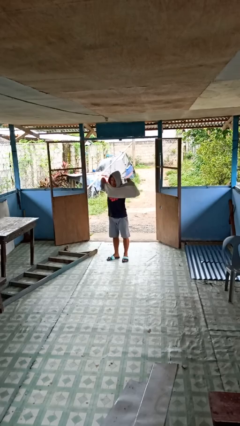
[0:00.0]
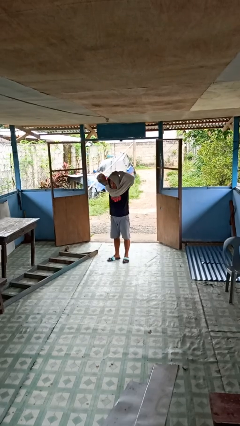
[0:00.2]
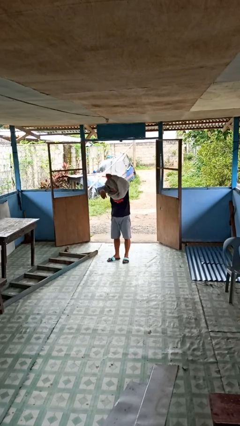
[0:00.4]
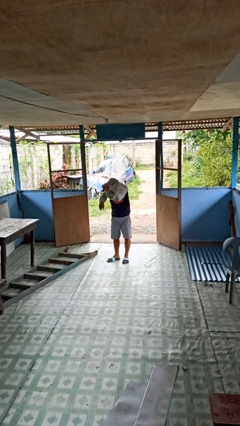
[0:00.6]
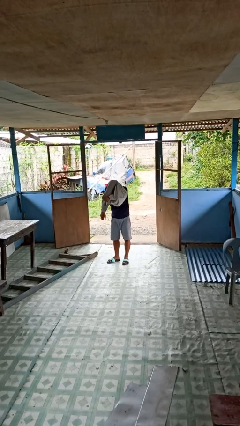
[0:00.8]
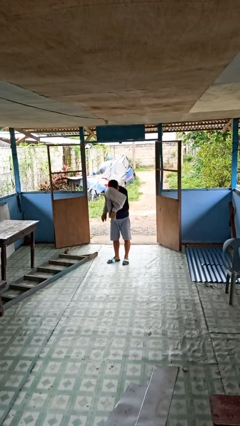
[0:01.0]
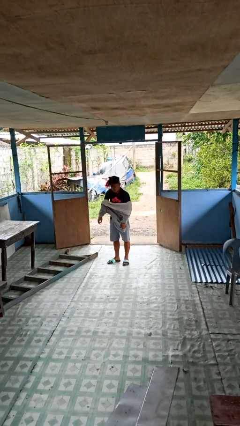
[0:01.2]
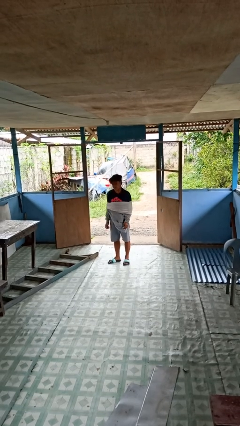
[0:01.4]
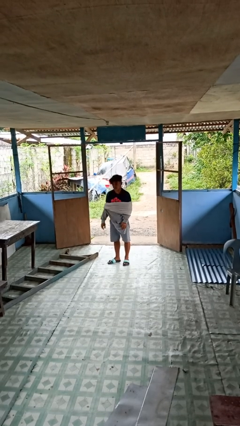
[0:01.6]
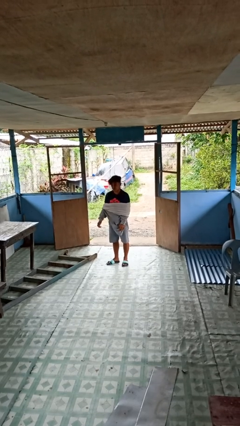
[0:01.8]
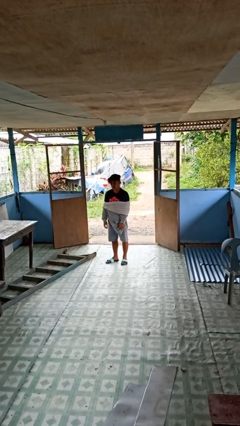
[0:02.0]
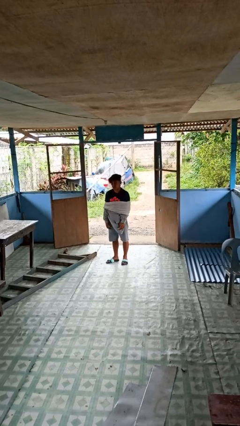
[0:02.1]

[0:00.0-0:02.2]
person takes off hoodie

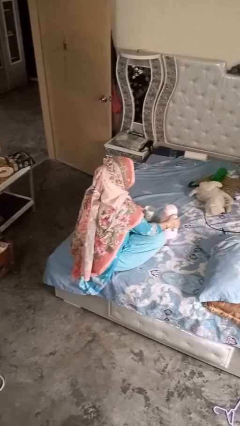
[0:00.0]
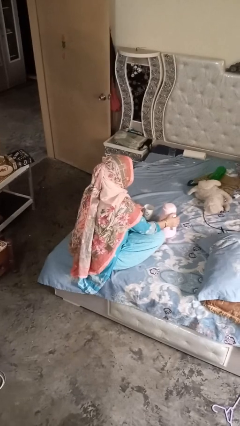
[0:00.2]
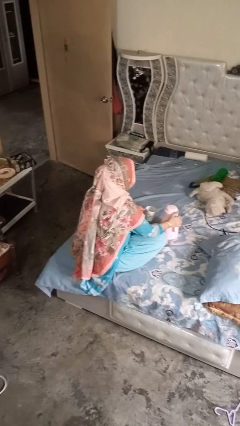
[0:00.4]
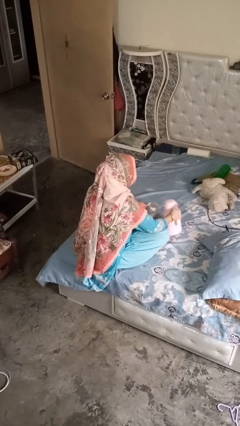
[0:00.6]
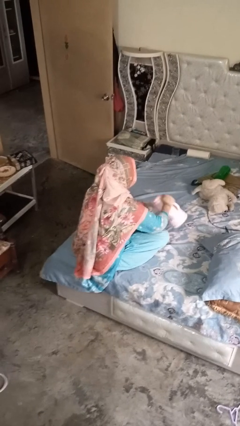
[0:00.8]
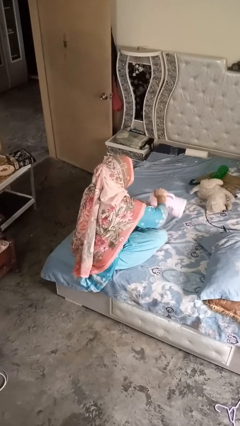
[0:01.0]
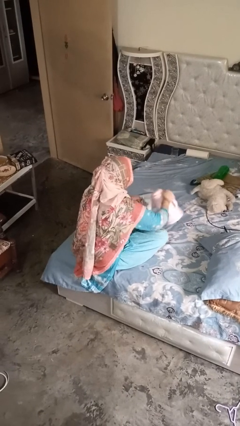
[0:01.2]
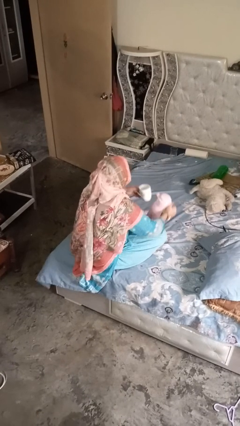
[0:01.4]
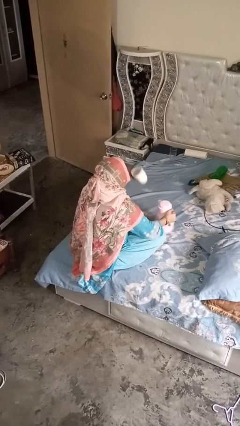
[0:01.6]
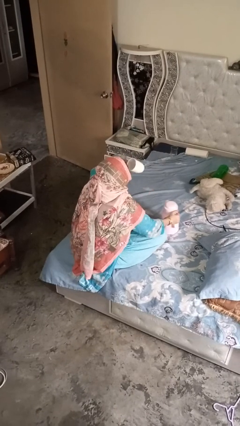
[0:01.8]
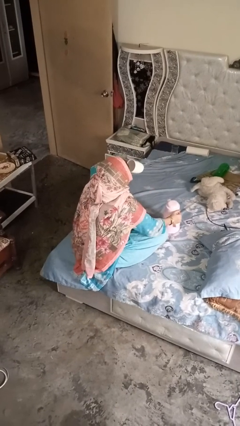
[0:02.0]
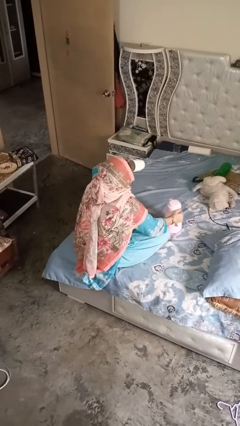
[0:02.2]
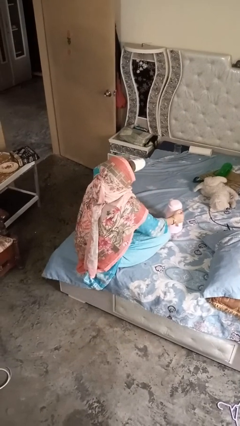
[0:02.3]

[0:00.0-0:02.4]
person pours coffee into mug

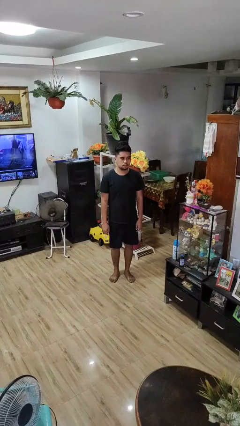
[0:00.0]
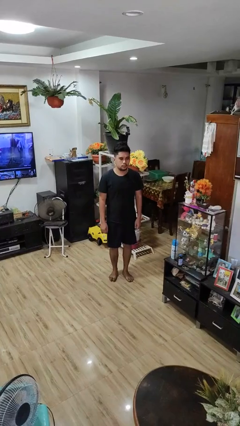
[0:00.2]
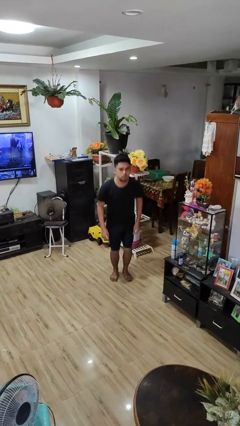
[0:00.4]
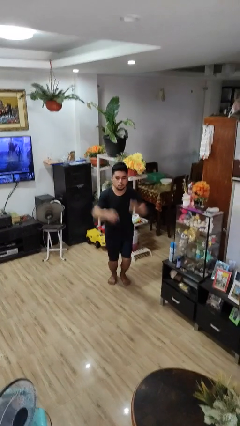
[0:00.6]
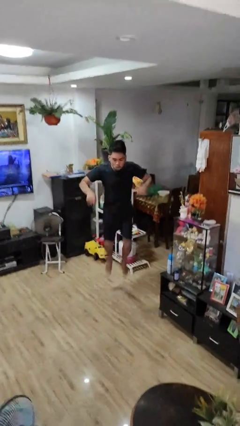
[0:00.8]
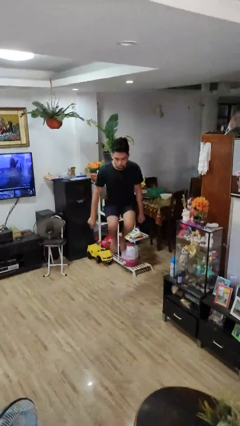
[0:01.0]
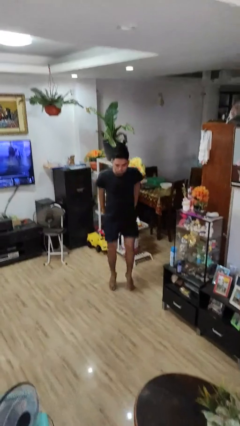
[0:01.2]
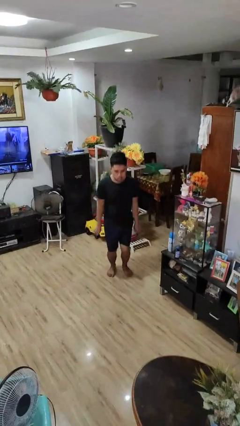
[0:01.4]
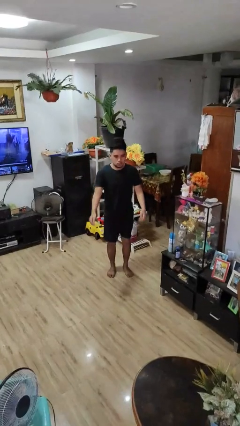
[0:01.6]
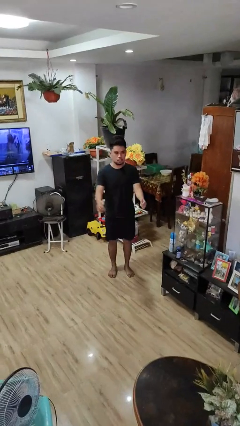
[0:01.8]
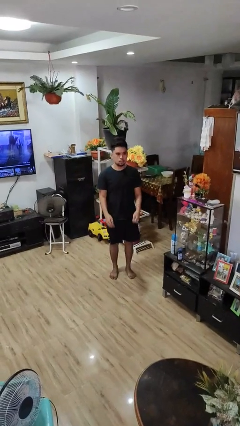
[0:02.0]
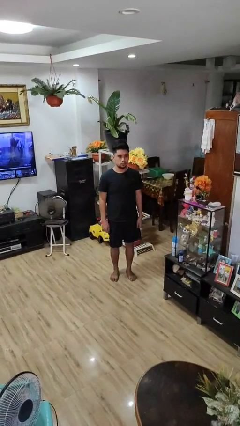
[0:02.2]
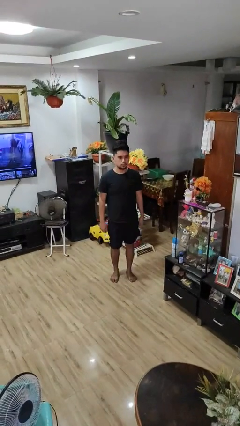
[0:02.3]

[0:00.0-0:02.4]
person jumps

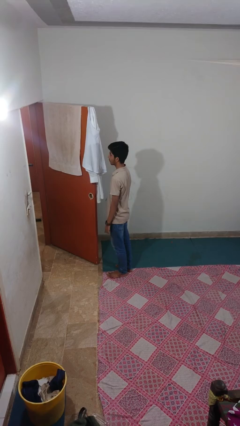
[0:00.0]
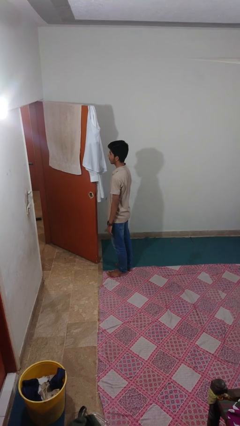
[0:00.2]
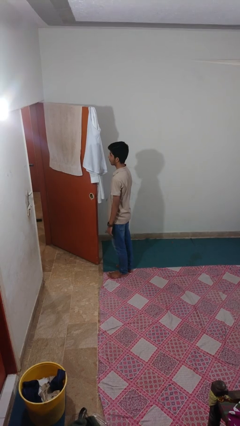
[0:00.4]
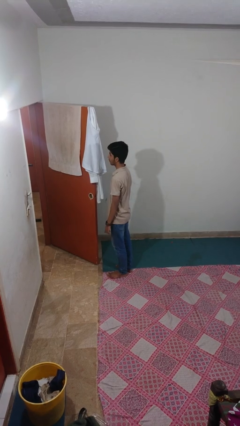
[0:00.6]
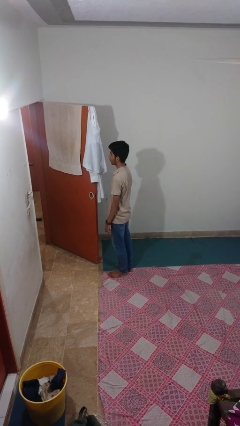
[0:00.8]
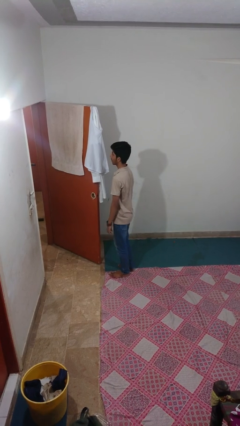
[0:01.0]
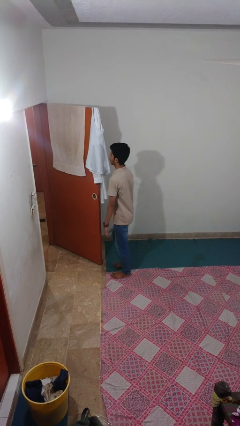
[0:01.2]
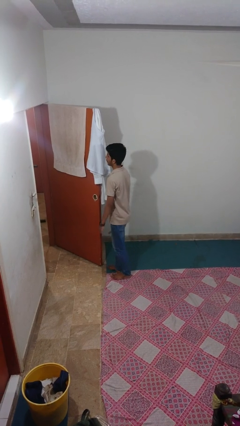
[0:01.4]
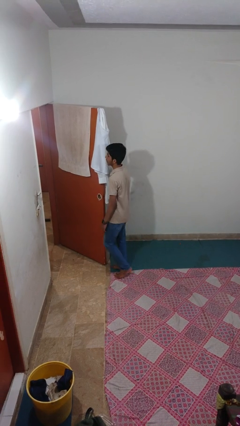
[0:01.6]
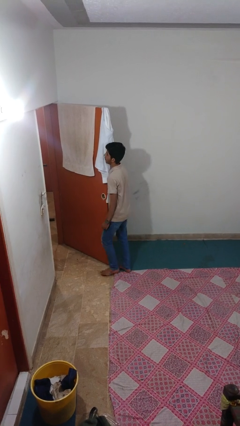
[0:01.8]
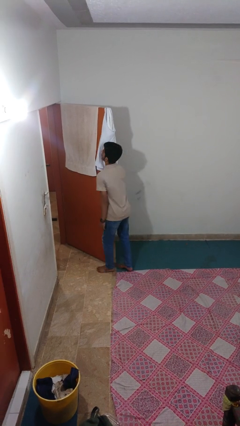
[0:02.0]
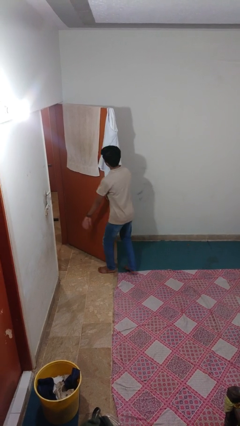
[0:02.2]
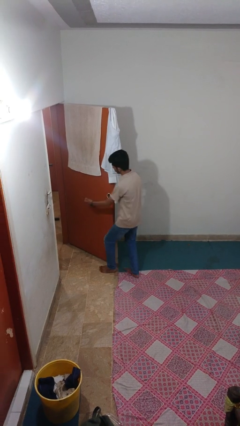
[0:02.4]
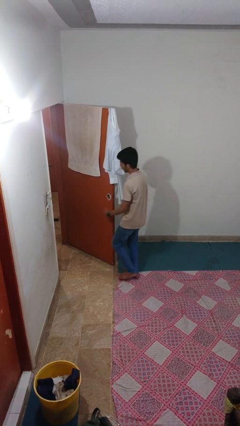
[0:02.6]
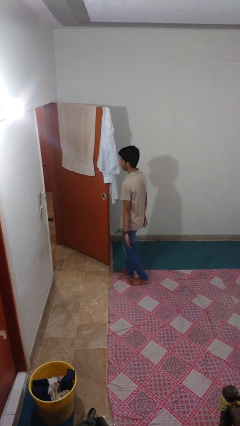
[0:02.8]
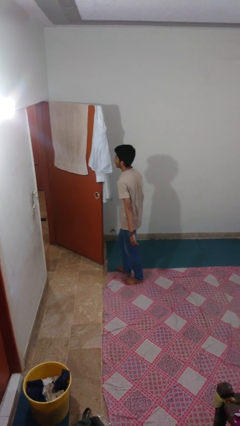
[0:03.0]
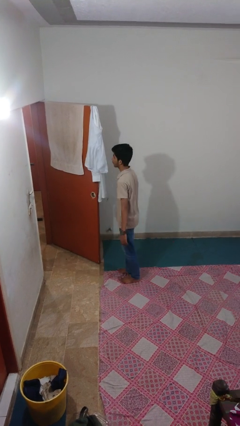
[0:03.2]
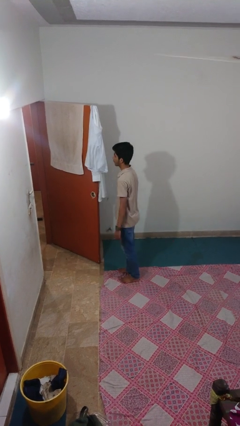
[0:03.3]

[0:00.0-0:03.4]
person bumps into wall

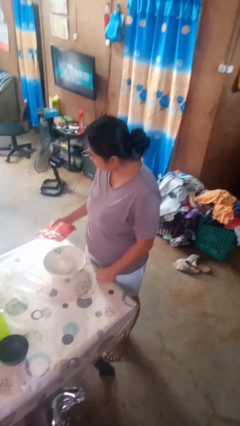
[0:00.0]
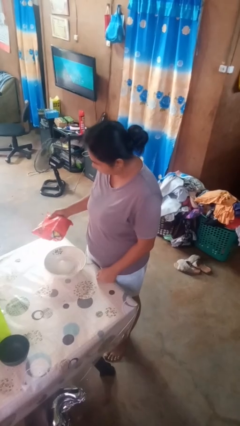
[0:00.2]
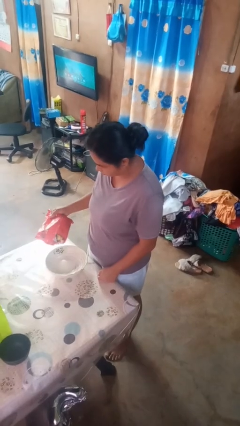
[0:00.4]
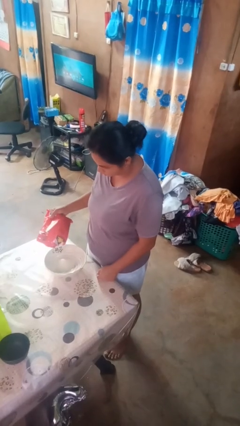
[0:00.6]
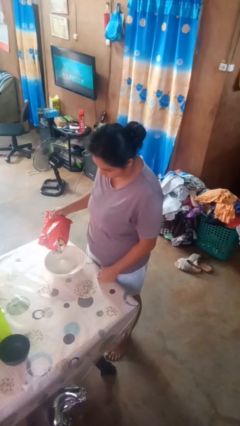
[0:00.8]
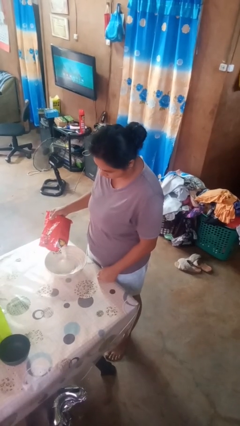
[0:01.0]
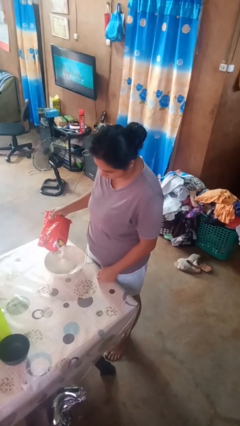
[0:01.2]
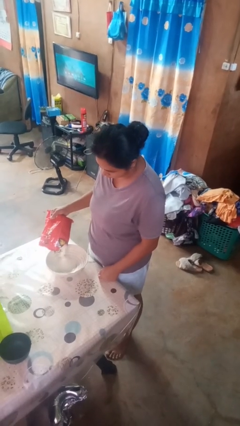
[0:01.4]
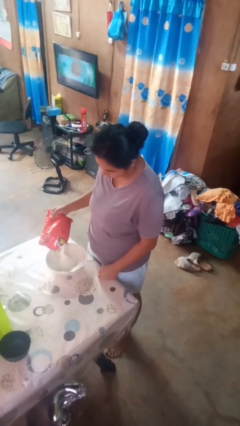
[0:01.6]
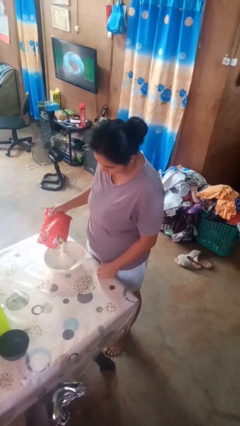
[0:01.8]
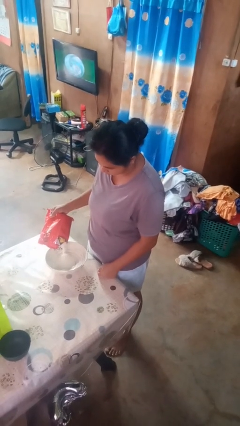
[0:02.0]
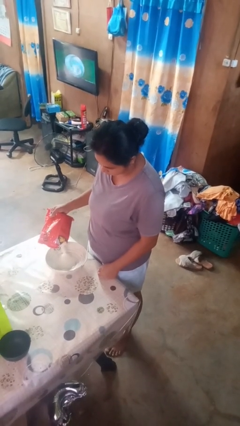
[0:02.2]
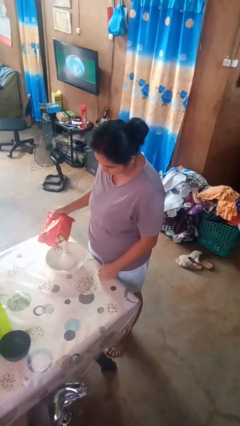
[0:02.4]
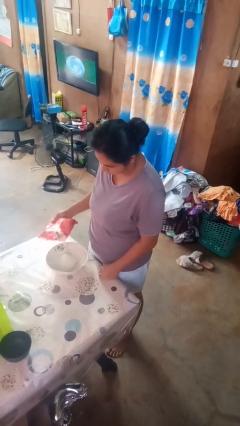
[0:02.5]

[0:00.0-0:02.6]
person pours into bowl

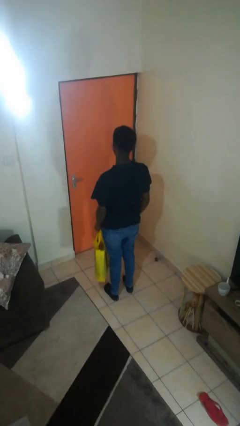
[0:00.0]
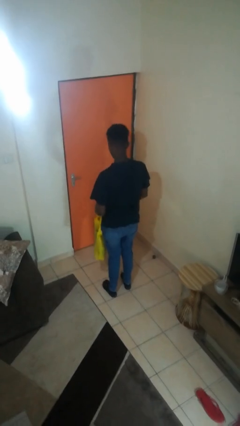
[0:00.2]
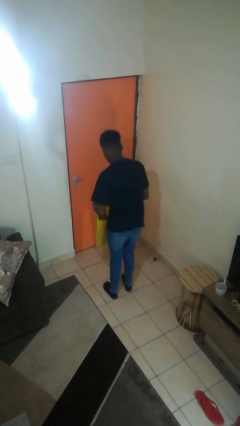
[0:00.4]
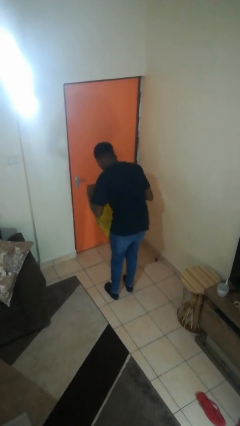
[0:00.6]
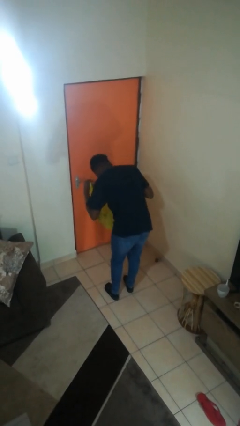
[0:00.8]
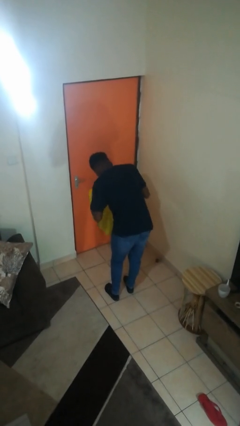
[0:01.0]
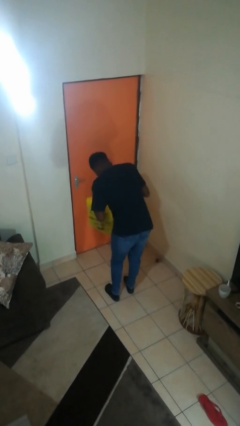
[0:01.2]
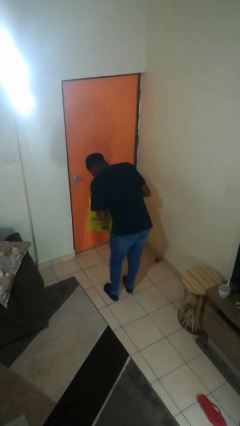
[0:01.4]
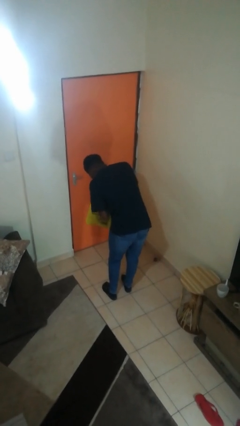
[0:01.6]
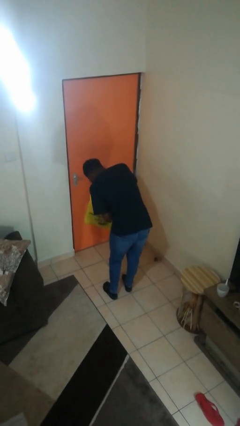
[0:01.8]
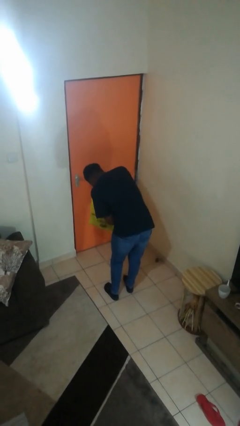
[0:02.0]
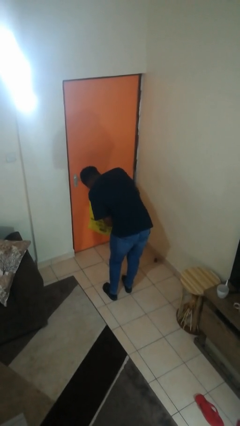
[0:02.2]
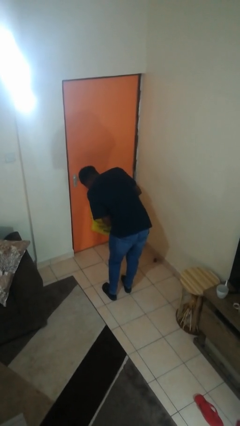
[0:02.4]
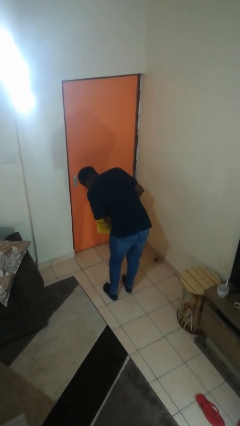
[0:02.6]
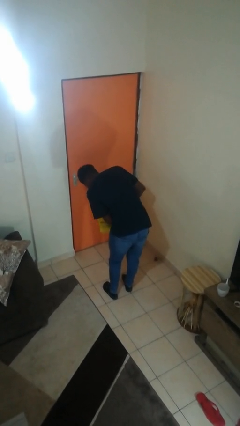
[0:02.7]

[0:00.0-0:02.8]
person searches in bag

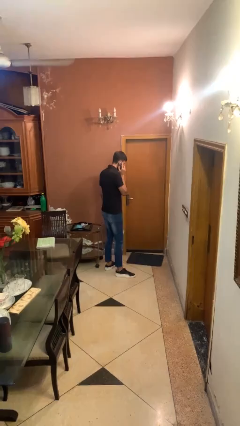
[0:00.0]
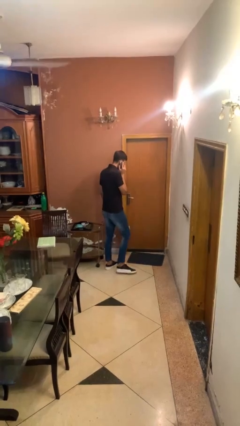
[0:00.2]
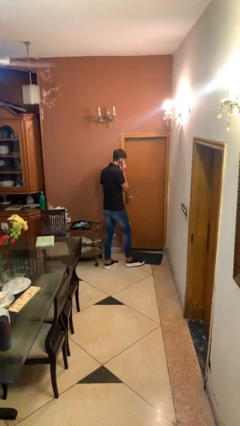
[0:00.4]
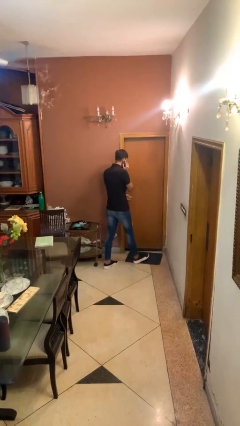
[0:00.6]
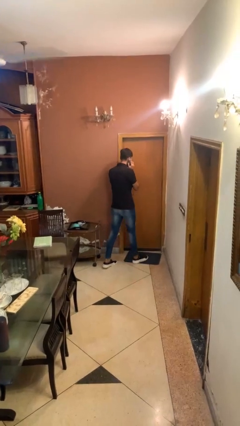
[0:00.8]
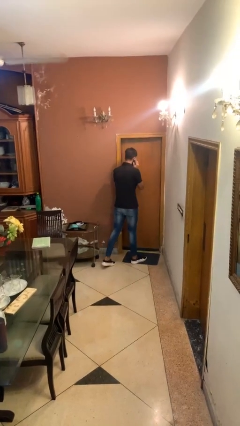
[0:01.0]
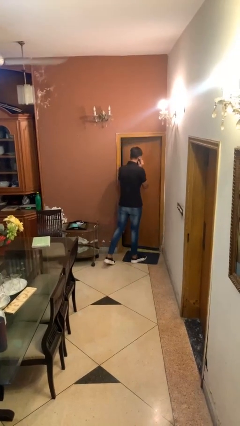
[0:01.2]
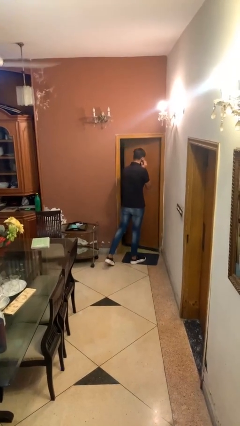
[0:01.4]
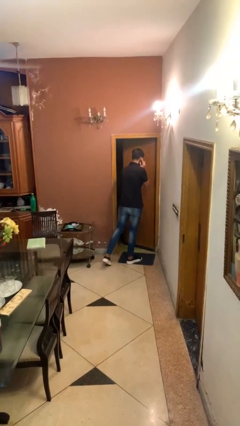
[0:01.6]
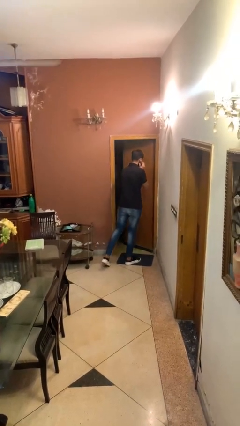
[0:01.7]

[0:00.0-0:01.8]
person opens facility door
